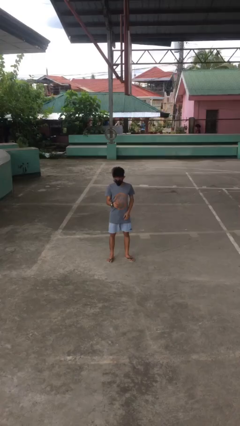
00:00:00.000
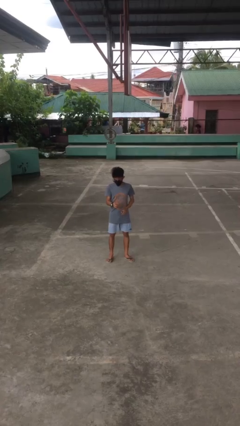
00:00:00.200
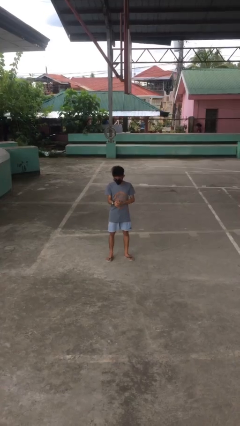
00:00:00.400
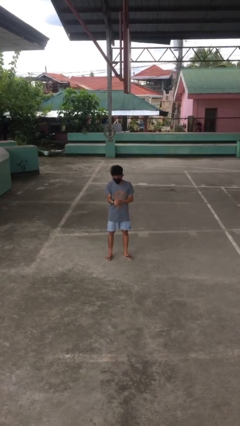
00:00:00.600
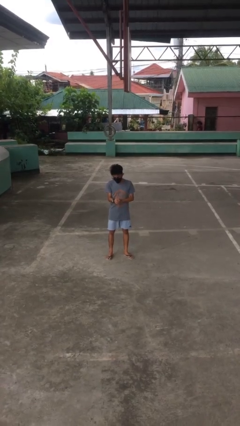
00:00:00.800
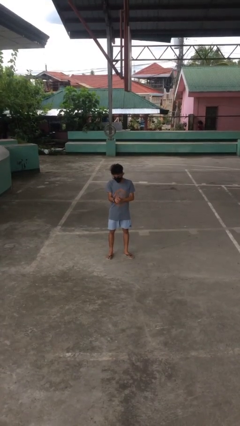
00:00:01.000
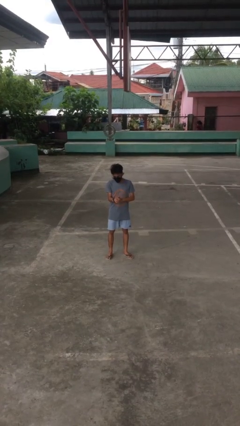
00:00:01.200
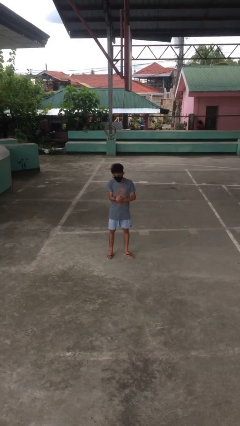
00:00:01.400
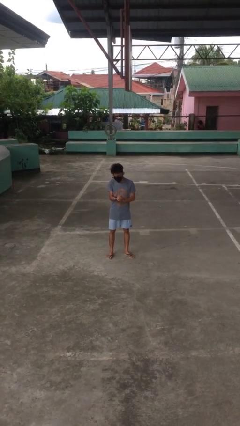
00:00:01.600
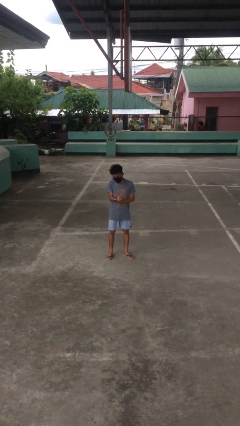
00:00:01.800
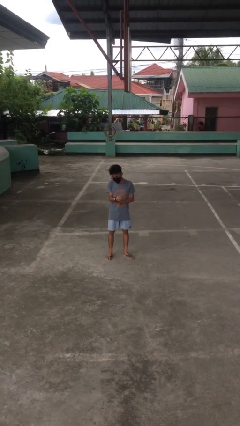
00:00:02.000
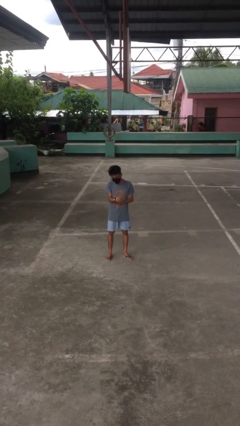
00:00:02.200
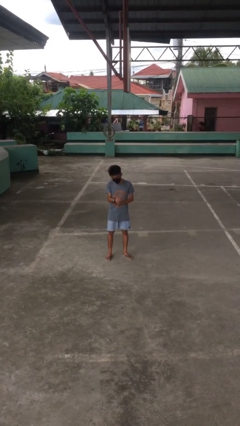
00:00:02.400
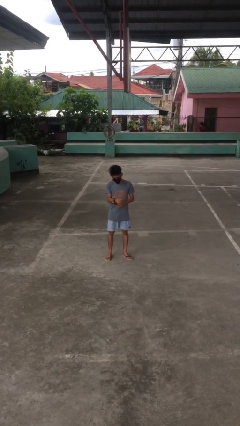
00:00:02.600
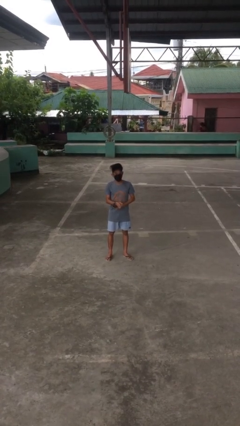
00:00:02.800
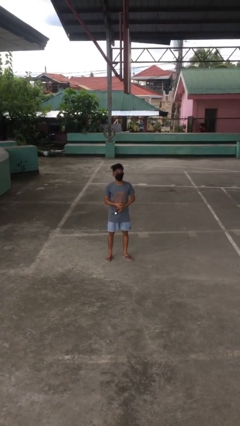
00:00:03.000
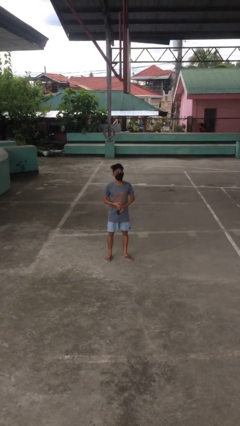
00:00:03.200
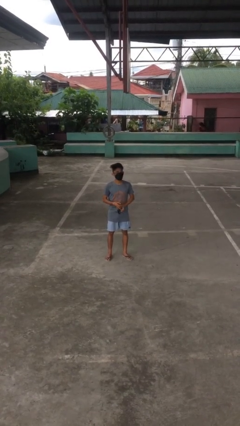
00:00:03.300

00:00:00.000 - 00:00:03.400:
person takes off wristwatch

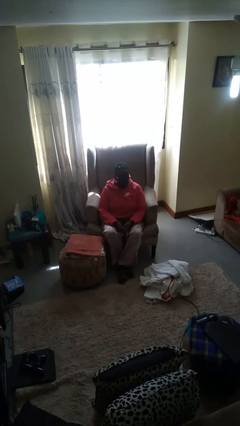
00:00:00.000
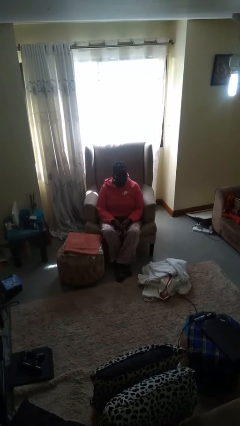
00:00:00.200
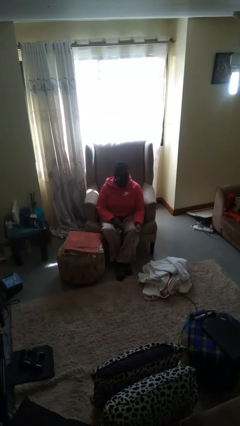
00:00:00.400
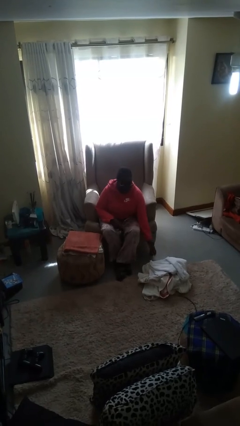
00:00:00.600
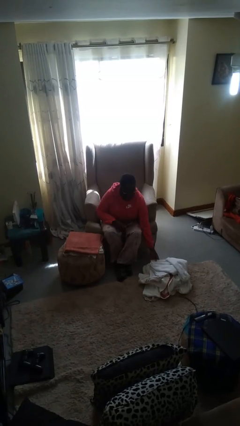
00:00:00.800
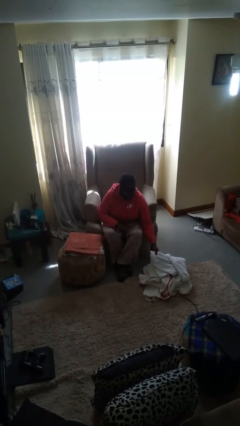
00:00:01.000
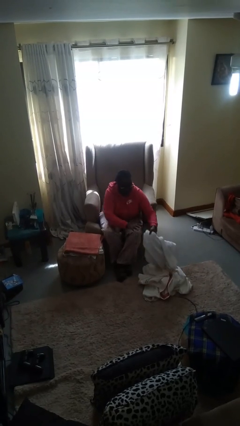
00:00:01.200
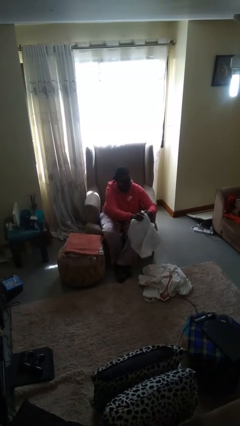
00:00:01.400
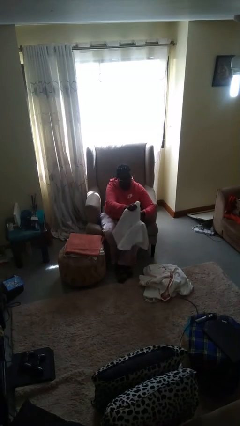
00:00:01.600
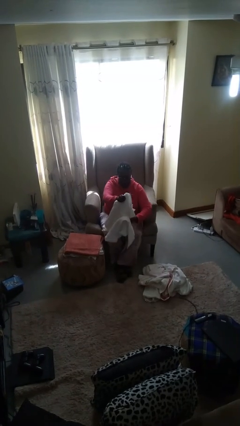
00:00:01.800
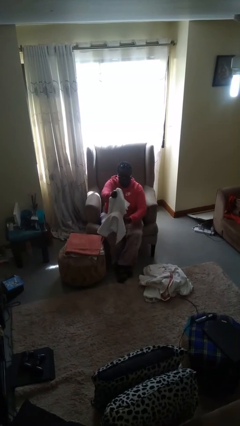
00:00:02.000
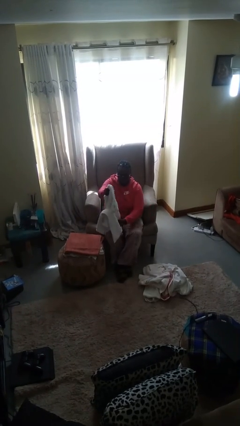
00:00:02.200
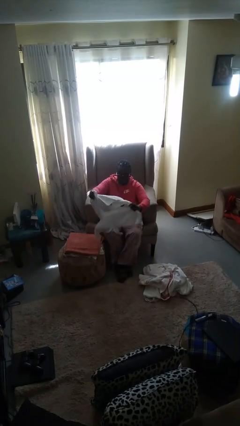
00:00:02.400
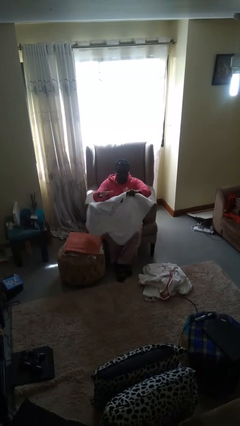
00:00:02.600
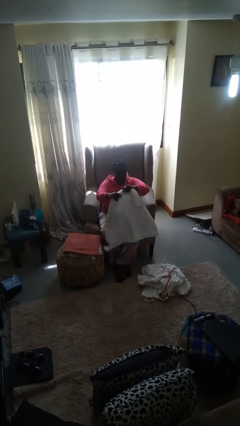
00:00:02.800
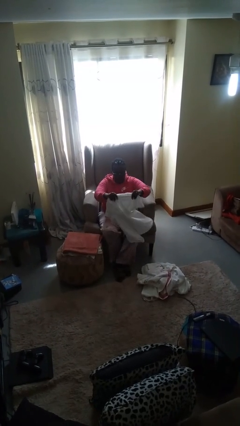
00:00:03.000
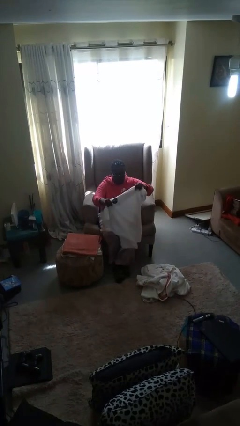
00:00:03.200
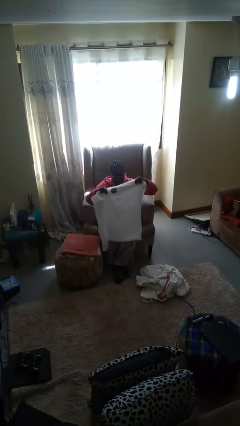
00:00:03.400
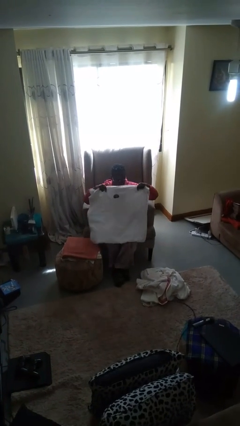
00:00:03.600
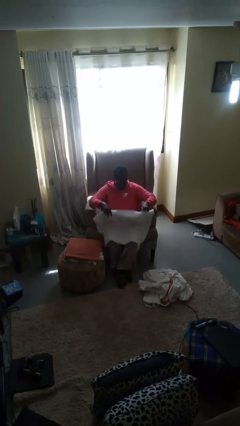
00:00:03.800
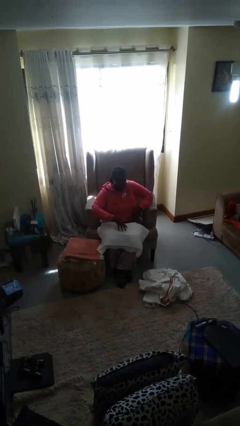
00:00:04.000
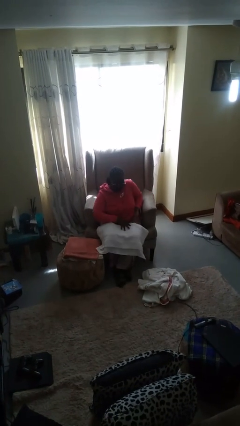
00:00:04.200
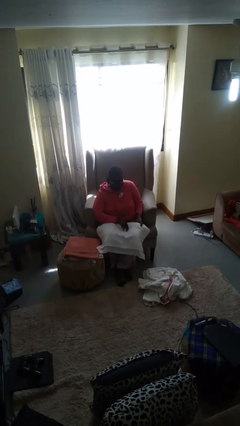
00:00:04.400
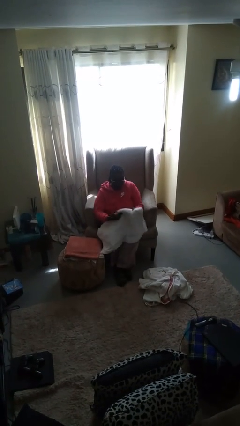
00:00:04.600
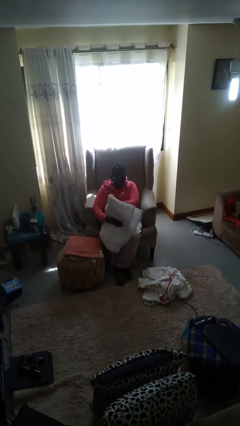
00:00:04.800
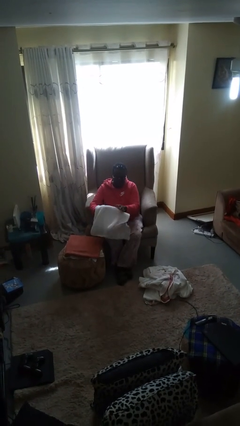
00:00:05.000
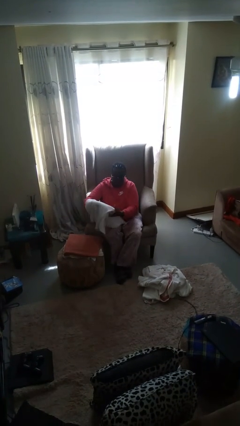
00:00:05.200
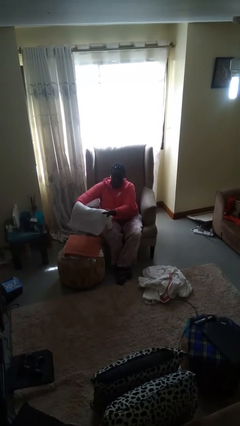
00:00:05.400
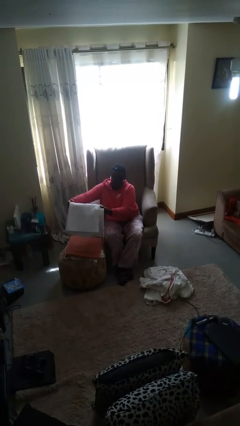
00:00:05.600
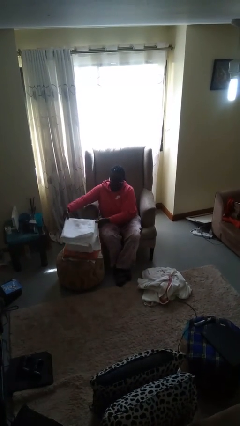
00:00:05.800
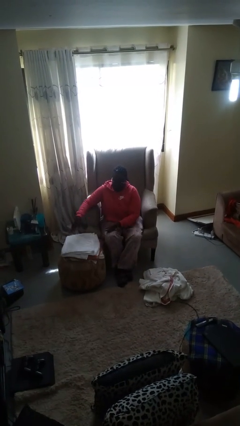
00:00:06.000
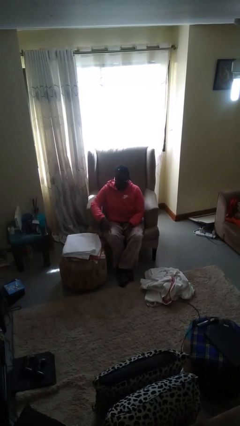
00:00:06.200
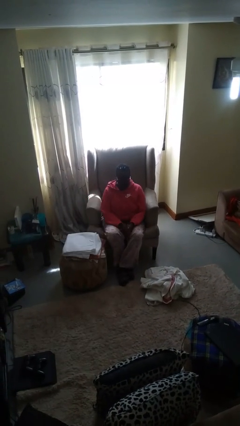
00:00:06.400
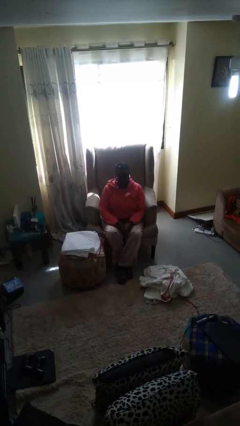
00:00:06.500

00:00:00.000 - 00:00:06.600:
person folds towel

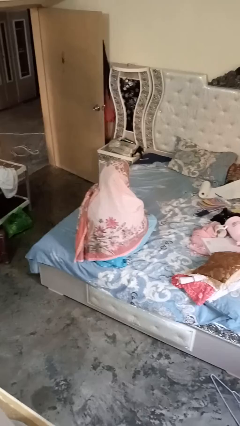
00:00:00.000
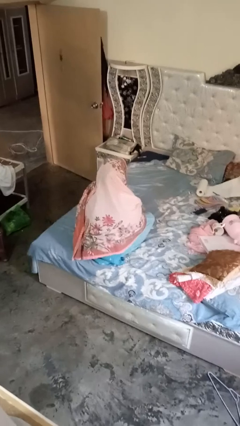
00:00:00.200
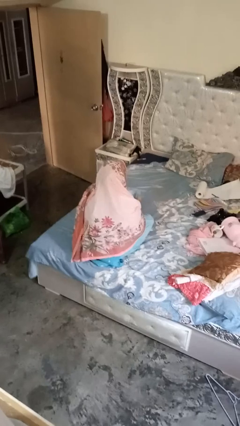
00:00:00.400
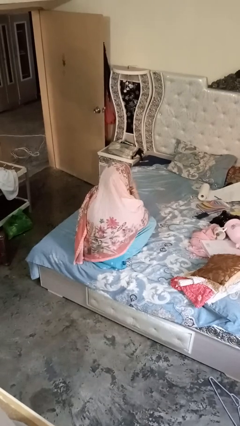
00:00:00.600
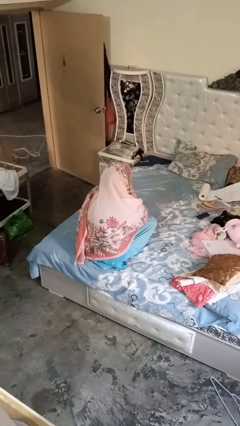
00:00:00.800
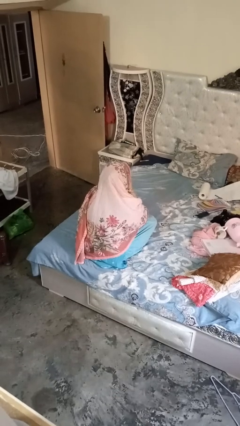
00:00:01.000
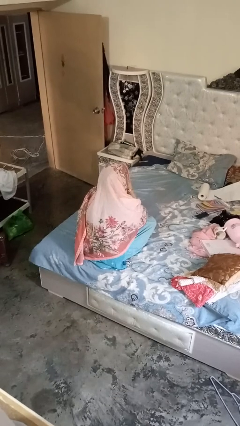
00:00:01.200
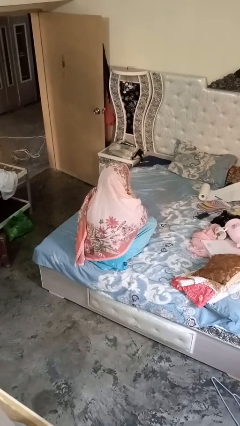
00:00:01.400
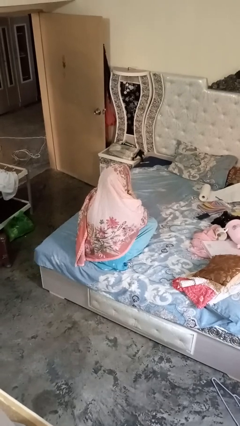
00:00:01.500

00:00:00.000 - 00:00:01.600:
person blows nose

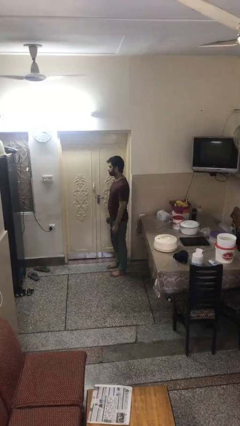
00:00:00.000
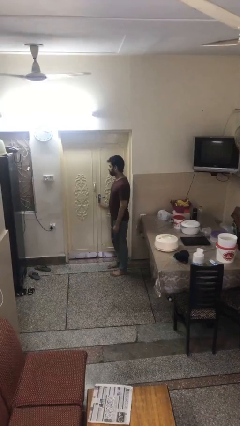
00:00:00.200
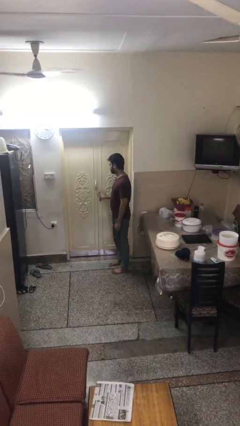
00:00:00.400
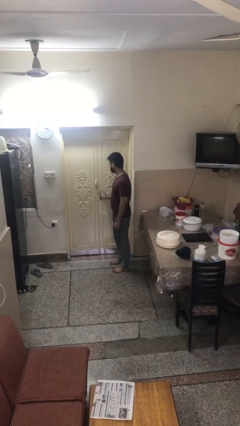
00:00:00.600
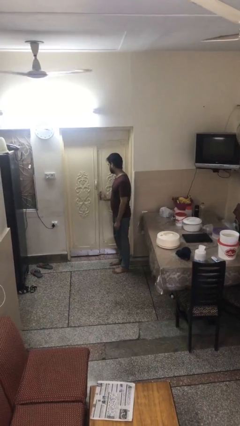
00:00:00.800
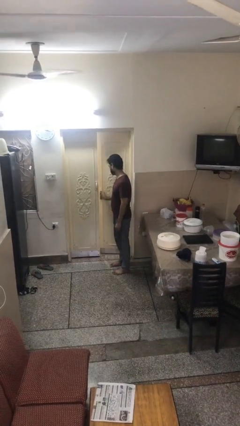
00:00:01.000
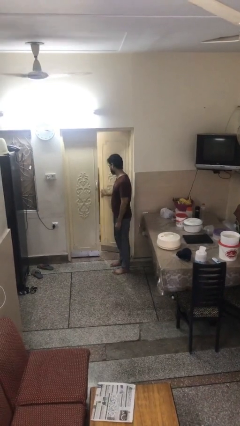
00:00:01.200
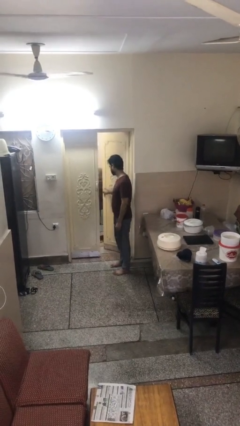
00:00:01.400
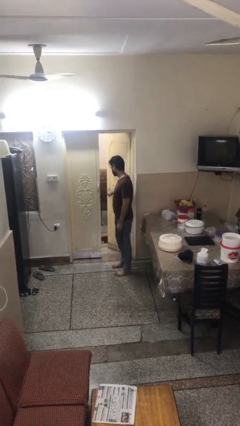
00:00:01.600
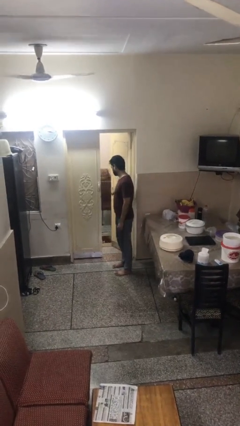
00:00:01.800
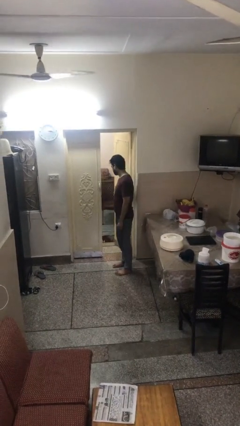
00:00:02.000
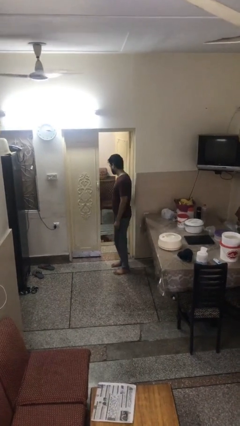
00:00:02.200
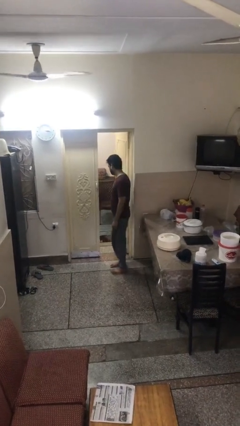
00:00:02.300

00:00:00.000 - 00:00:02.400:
person opens facility door

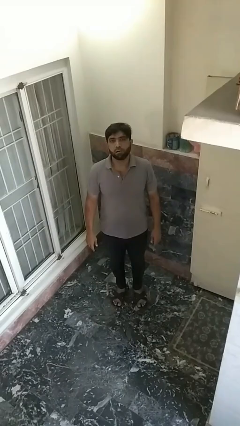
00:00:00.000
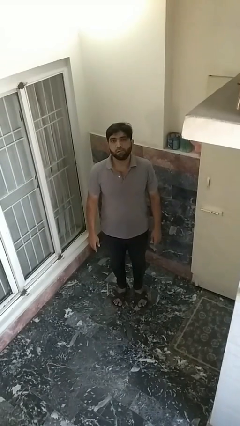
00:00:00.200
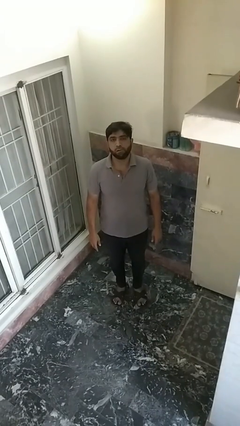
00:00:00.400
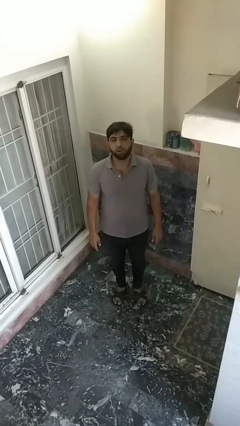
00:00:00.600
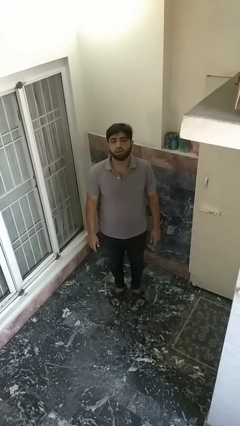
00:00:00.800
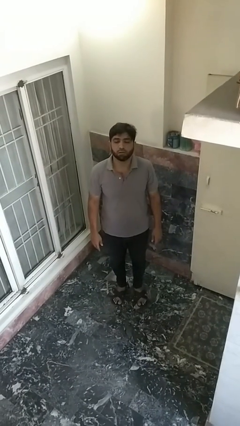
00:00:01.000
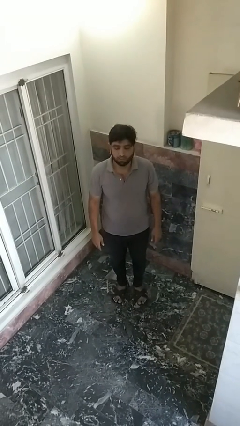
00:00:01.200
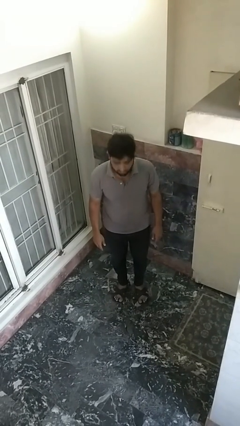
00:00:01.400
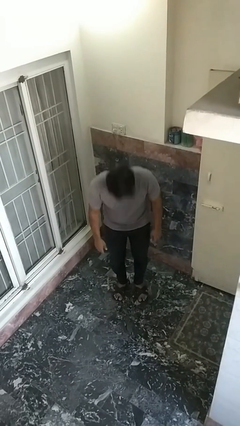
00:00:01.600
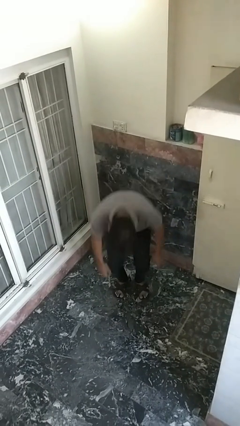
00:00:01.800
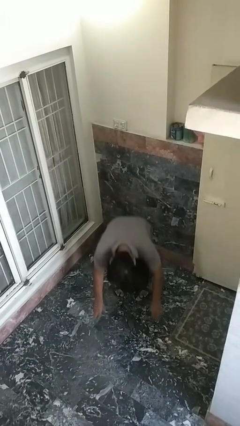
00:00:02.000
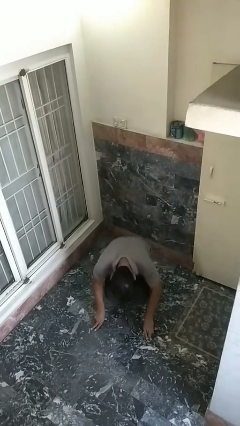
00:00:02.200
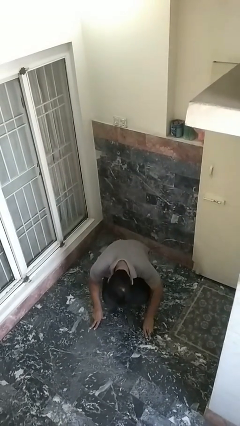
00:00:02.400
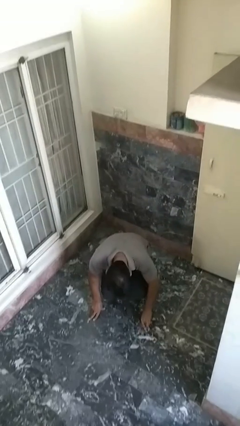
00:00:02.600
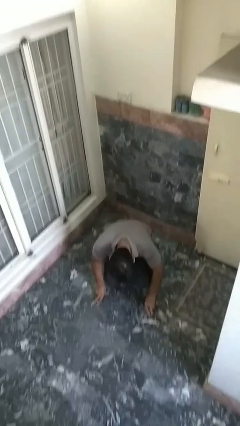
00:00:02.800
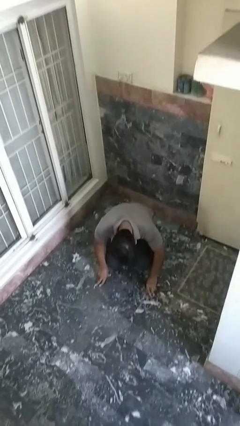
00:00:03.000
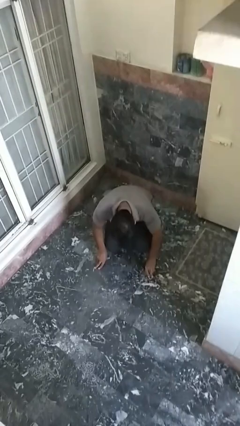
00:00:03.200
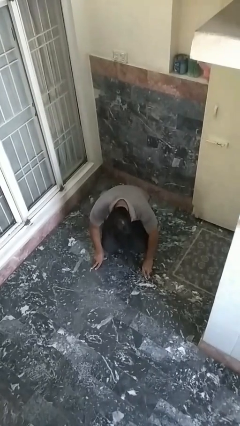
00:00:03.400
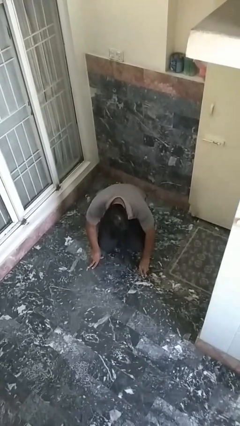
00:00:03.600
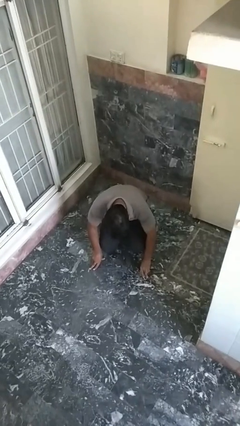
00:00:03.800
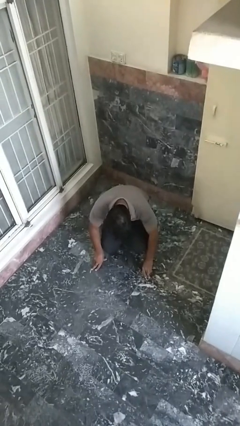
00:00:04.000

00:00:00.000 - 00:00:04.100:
person falls while standing
